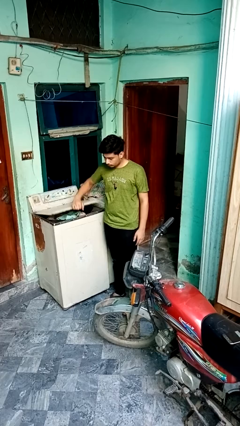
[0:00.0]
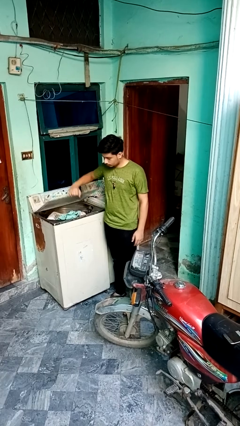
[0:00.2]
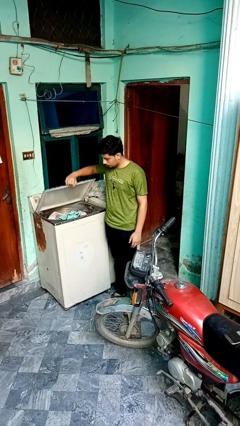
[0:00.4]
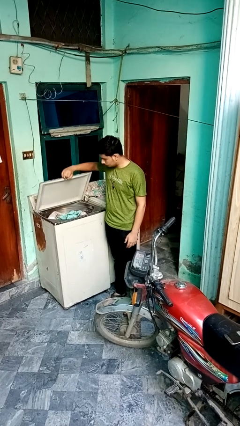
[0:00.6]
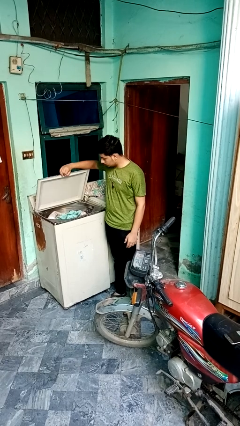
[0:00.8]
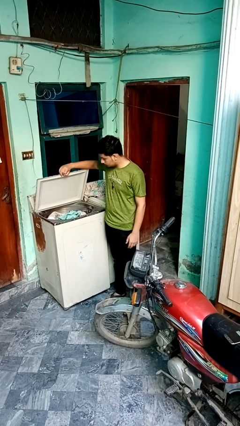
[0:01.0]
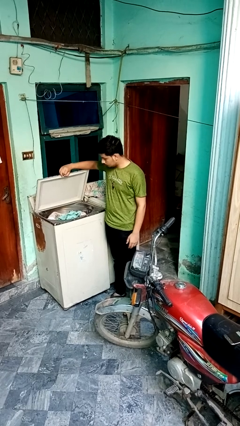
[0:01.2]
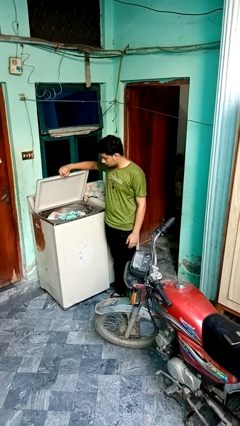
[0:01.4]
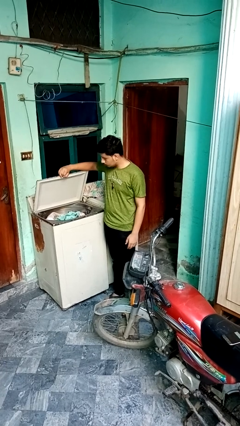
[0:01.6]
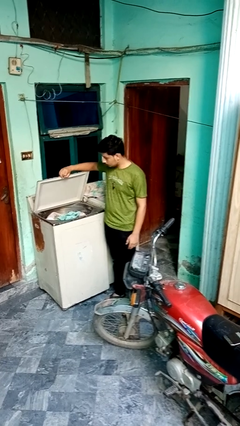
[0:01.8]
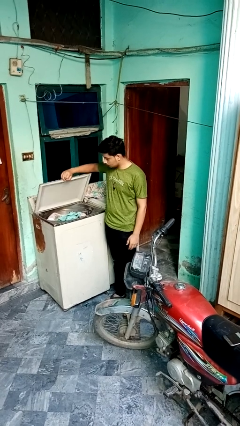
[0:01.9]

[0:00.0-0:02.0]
person opens clothes washer

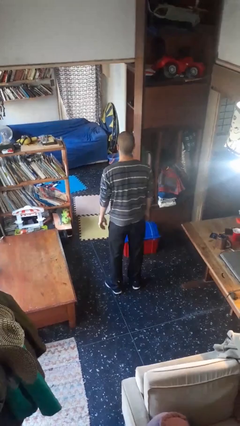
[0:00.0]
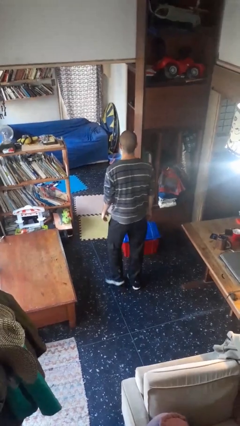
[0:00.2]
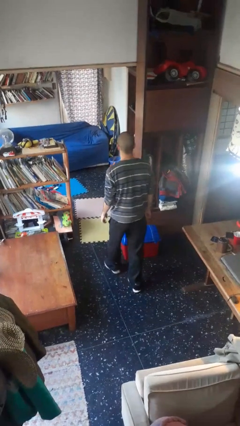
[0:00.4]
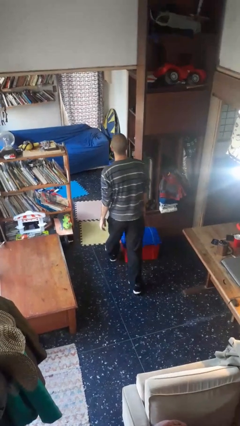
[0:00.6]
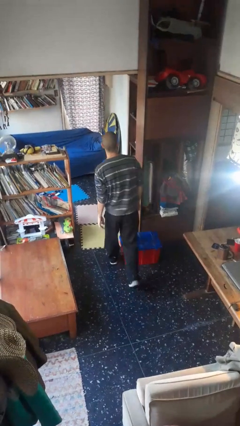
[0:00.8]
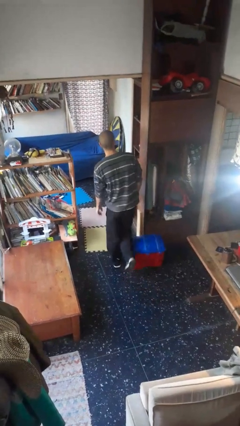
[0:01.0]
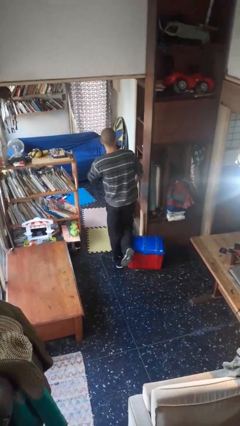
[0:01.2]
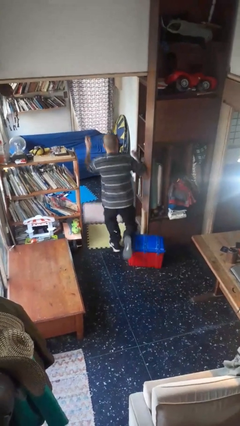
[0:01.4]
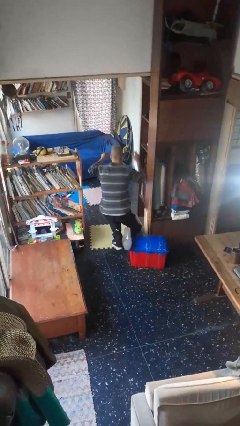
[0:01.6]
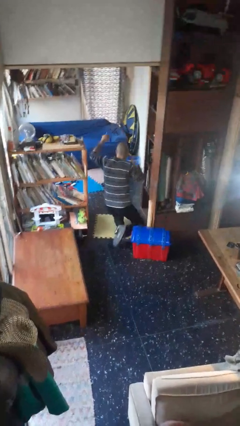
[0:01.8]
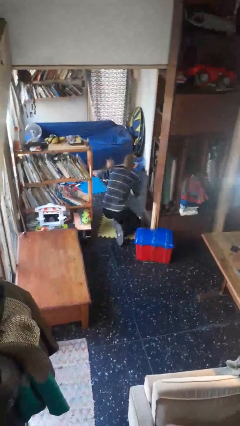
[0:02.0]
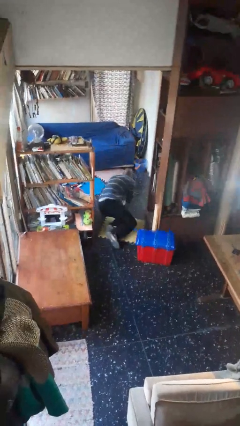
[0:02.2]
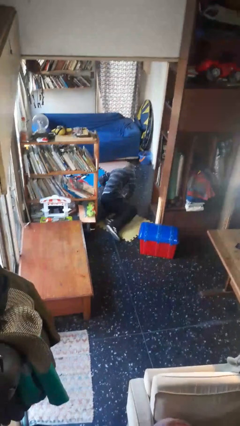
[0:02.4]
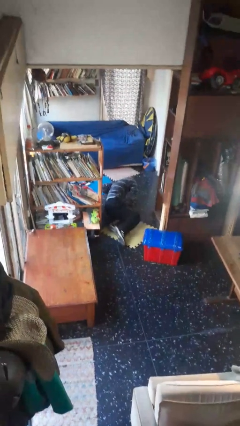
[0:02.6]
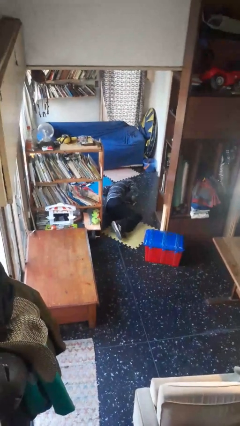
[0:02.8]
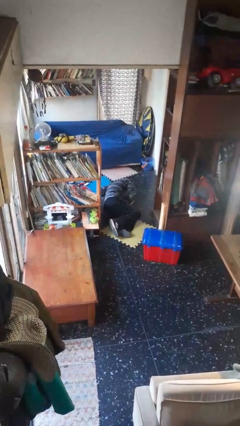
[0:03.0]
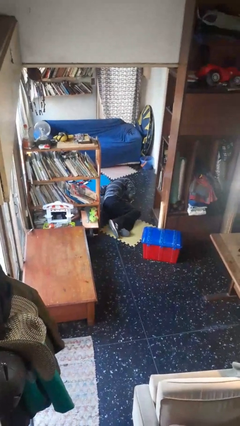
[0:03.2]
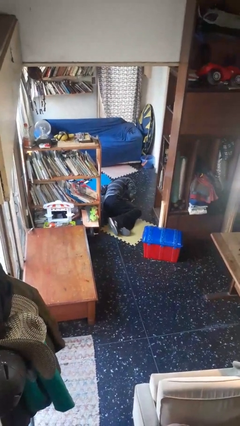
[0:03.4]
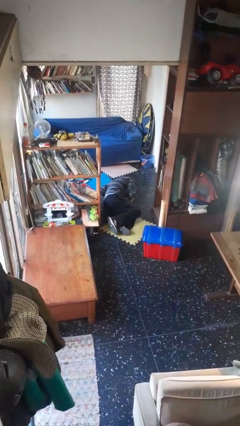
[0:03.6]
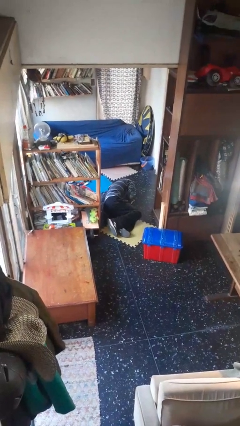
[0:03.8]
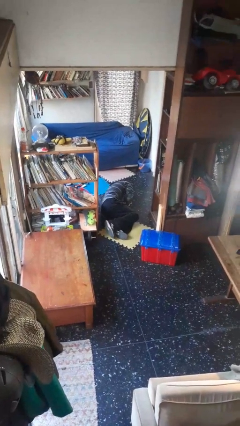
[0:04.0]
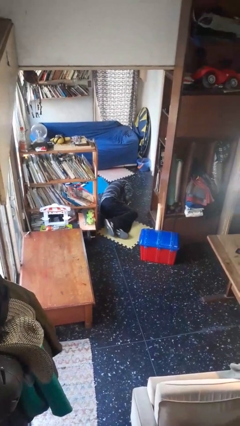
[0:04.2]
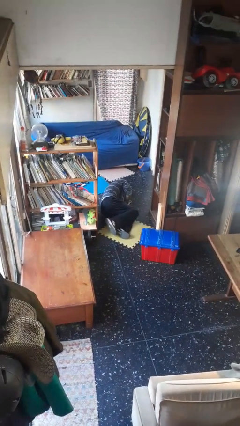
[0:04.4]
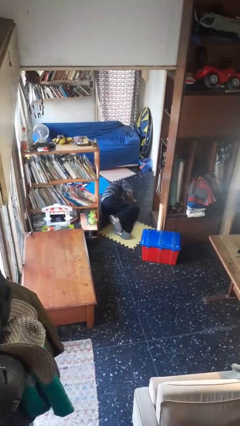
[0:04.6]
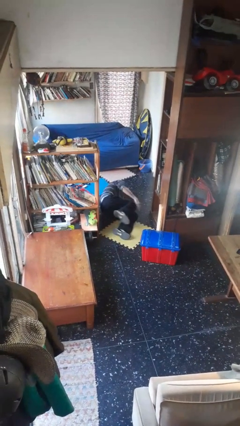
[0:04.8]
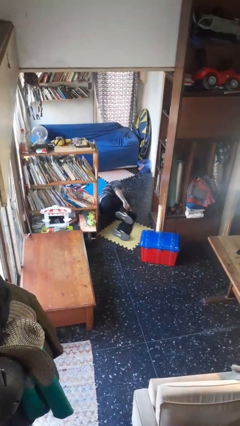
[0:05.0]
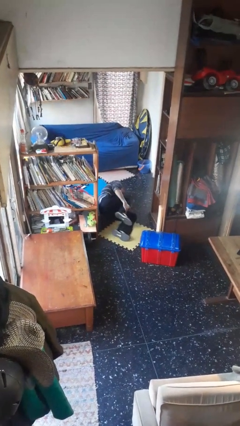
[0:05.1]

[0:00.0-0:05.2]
person trips on object on floor

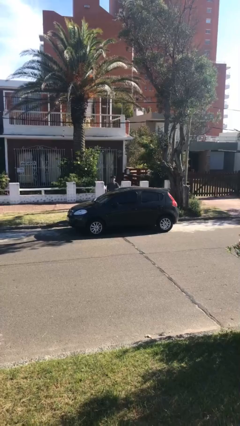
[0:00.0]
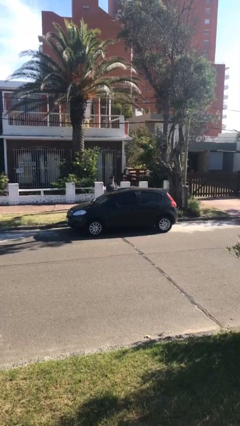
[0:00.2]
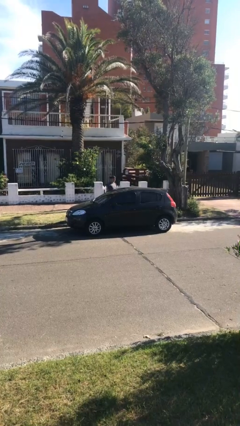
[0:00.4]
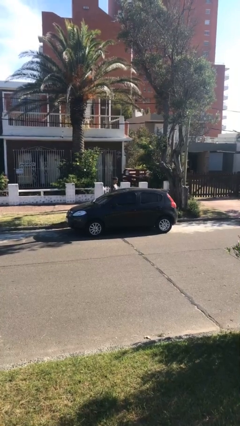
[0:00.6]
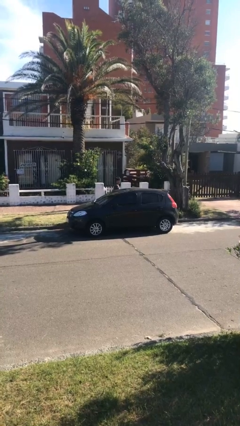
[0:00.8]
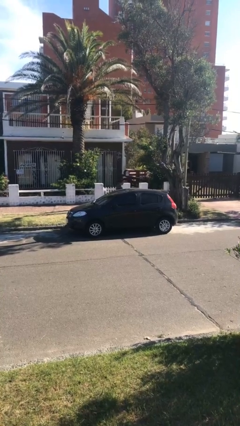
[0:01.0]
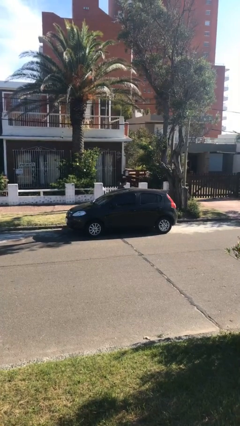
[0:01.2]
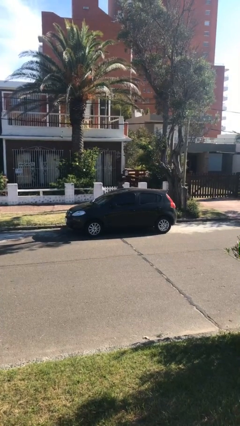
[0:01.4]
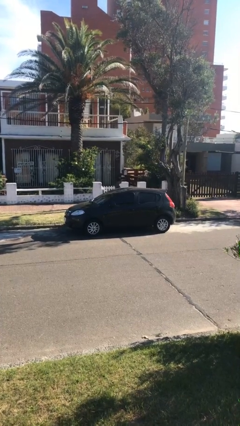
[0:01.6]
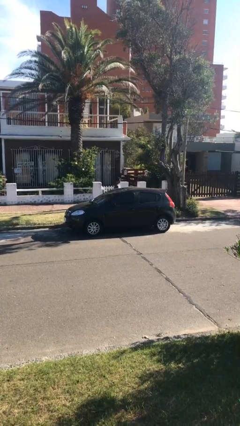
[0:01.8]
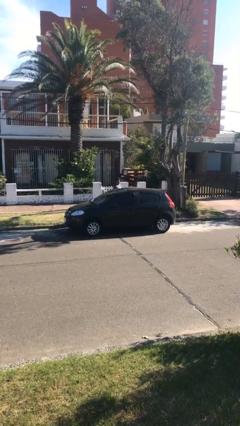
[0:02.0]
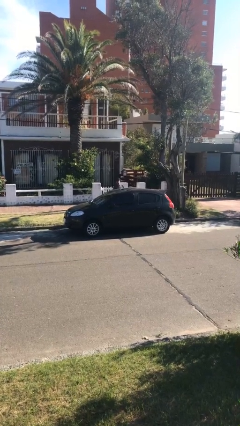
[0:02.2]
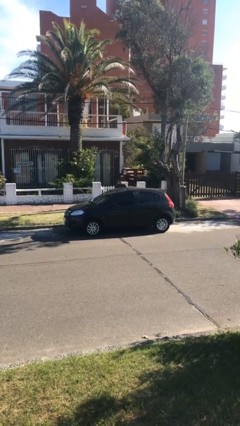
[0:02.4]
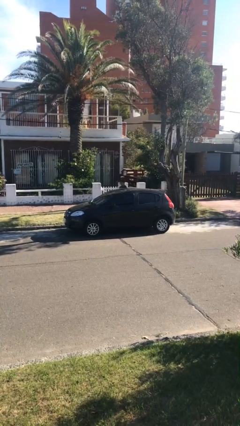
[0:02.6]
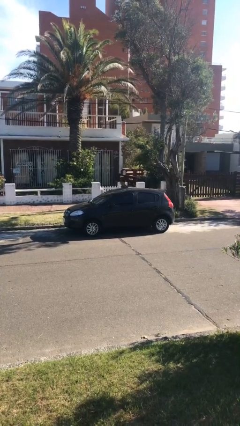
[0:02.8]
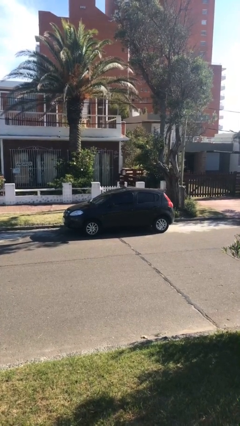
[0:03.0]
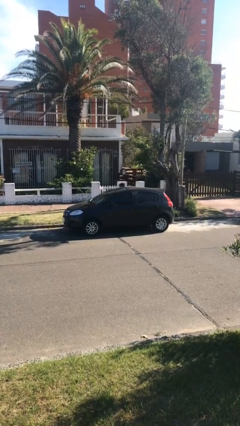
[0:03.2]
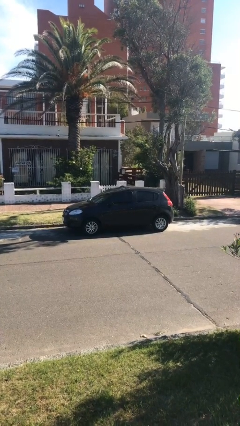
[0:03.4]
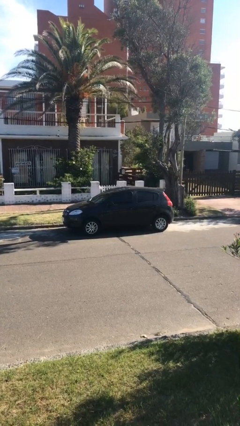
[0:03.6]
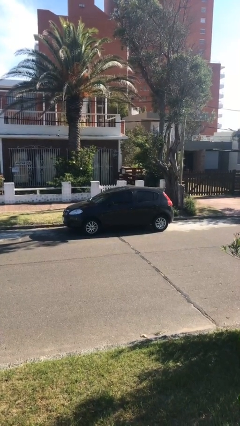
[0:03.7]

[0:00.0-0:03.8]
car picks up person

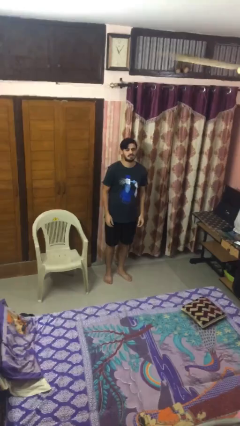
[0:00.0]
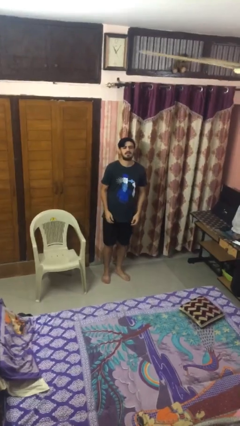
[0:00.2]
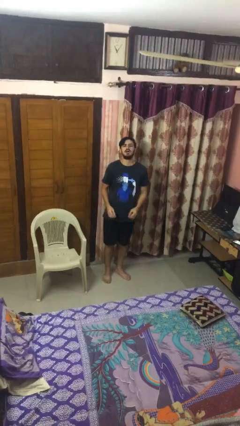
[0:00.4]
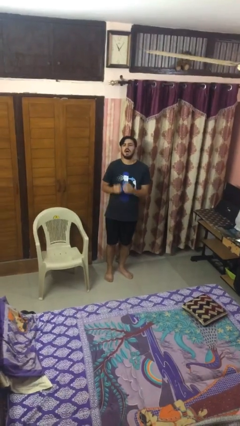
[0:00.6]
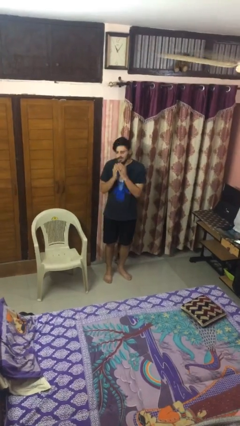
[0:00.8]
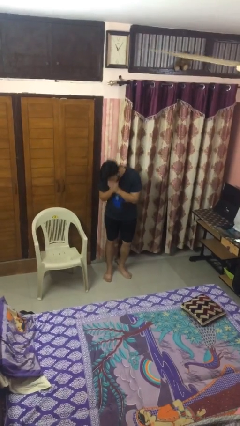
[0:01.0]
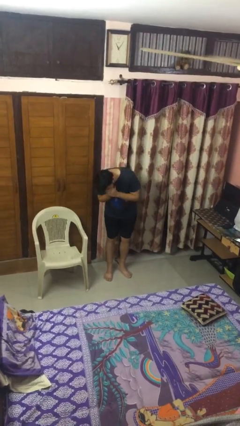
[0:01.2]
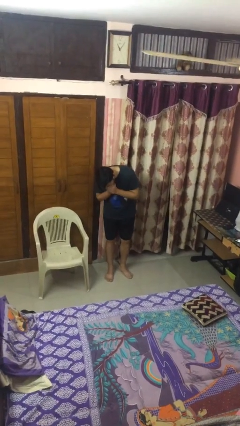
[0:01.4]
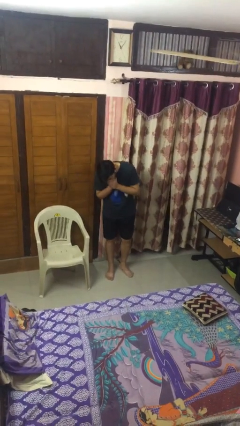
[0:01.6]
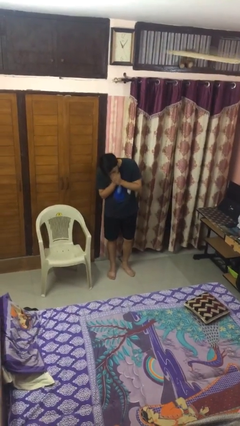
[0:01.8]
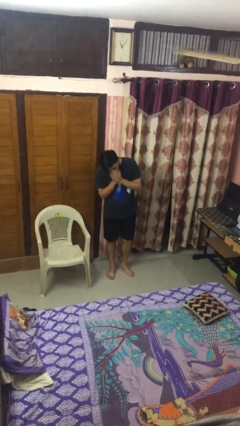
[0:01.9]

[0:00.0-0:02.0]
person sneezes into hand

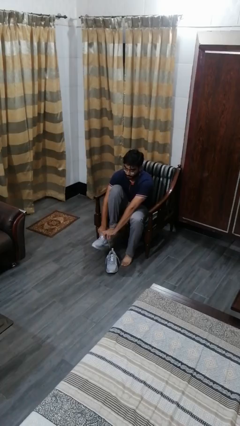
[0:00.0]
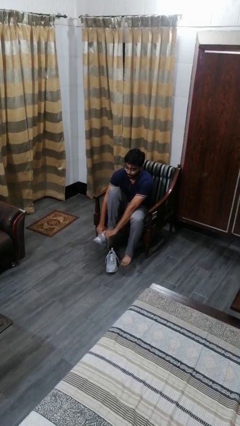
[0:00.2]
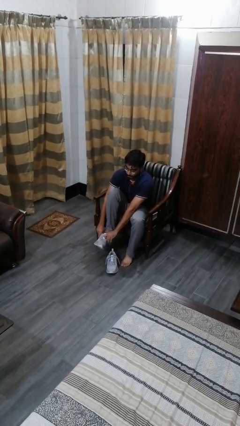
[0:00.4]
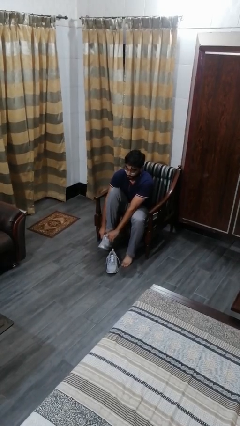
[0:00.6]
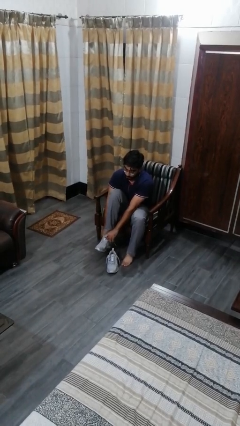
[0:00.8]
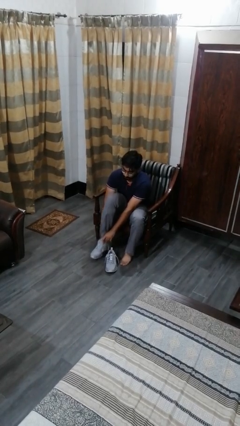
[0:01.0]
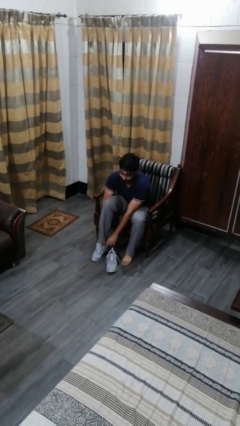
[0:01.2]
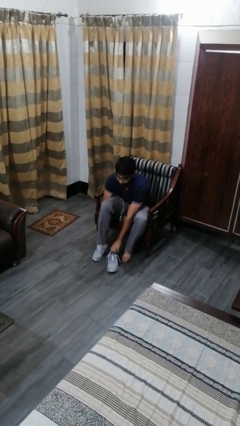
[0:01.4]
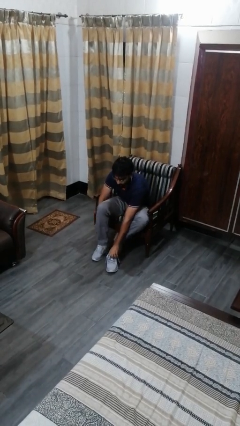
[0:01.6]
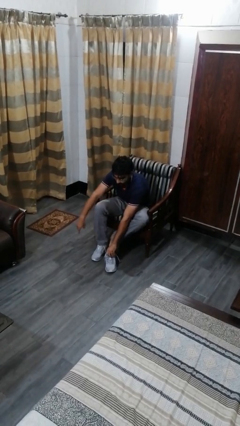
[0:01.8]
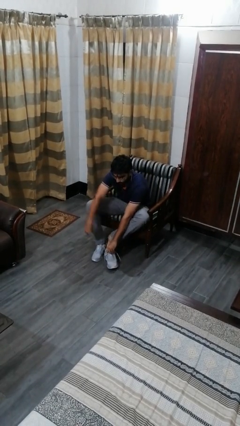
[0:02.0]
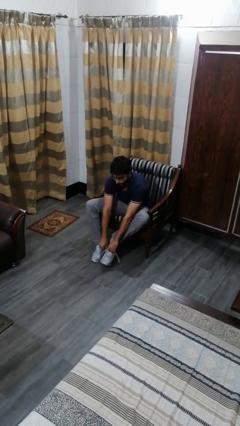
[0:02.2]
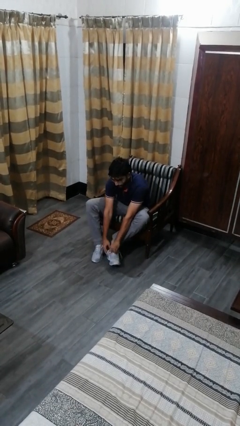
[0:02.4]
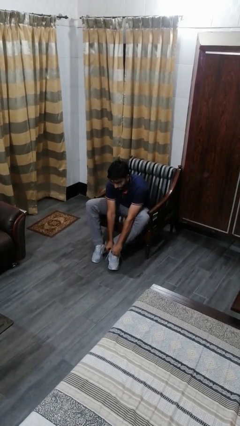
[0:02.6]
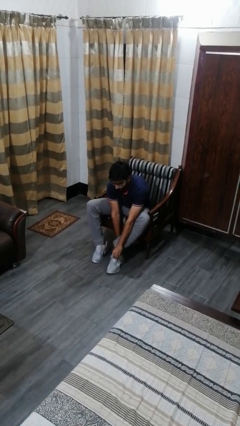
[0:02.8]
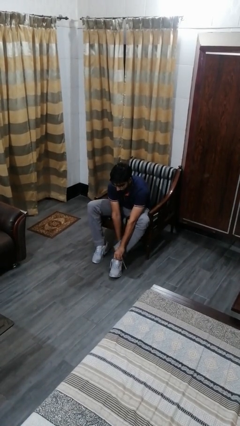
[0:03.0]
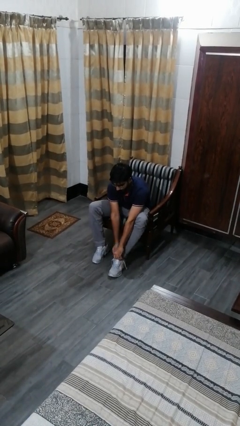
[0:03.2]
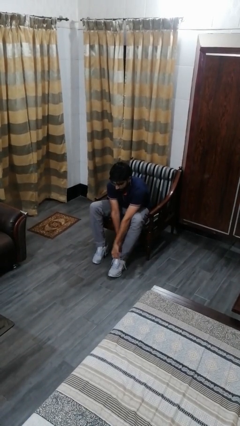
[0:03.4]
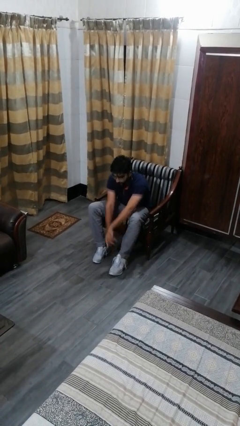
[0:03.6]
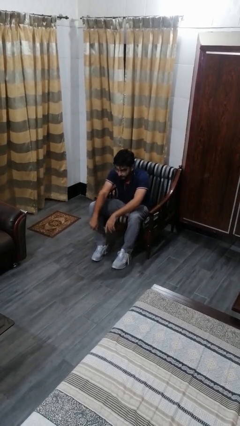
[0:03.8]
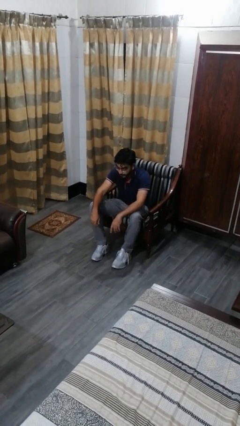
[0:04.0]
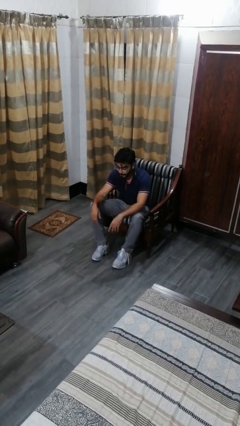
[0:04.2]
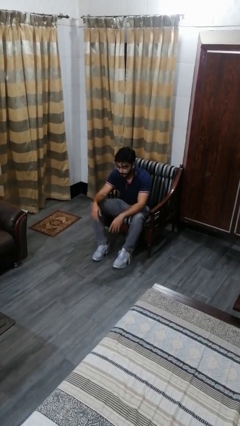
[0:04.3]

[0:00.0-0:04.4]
person puts on shoes
